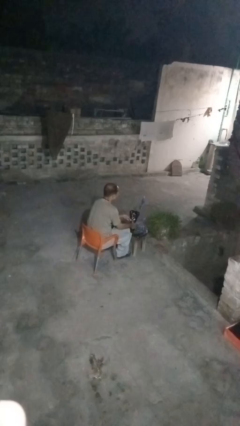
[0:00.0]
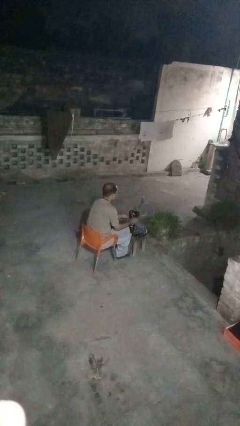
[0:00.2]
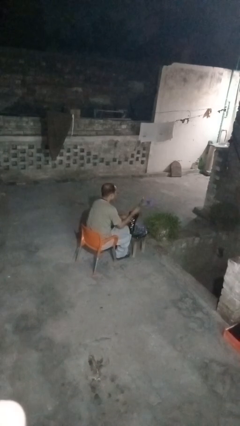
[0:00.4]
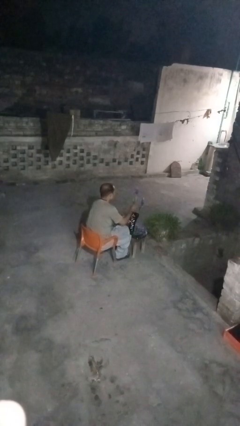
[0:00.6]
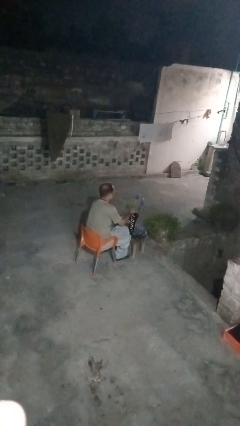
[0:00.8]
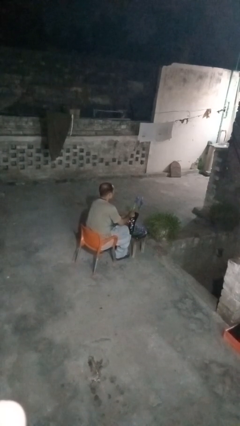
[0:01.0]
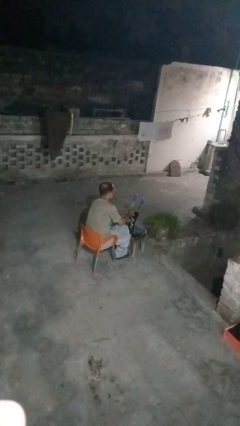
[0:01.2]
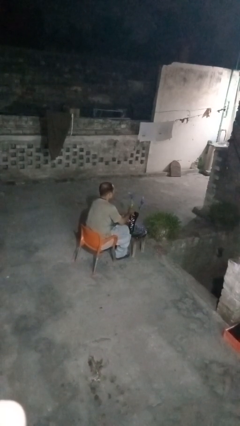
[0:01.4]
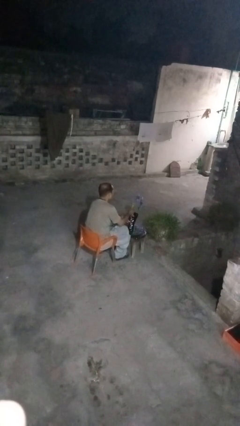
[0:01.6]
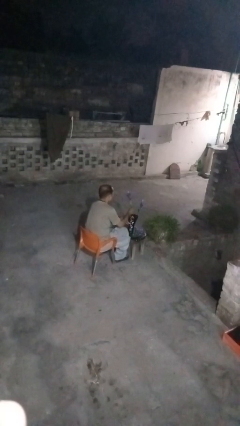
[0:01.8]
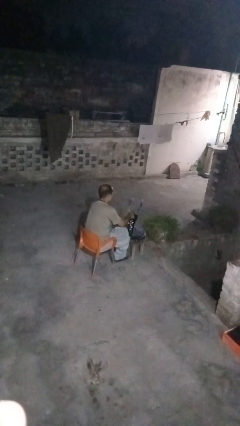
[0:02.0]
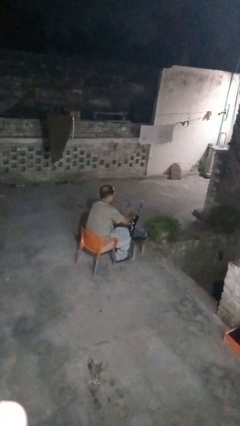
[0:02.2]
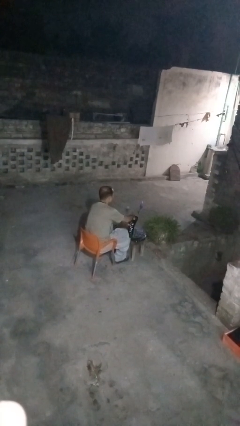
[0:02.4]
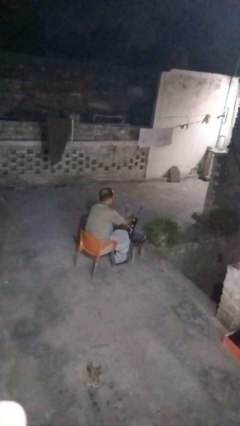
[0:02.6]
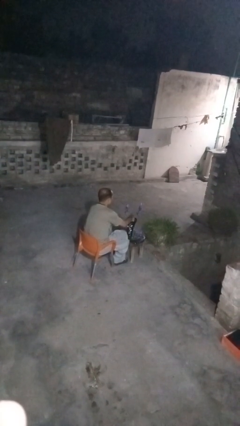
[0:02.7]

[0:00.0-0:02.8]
person arranges flowers in vase

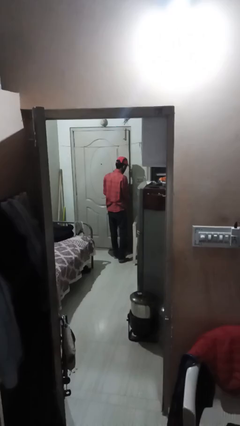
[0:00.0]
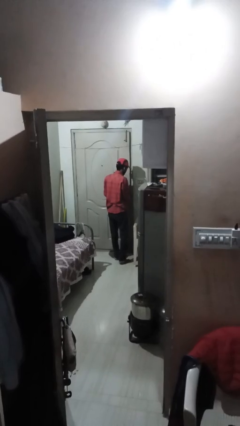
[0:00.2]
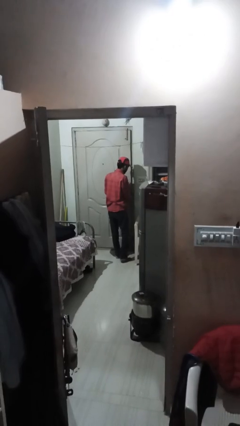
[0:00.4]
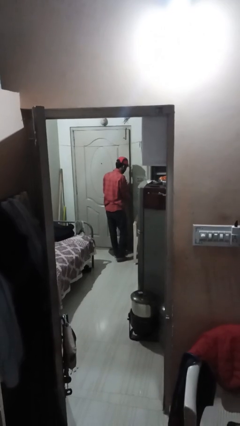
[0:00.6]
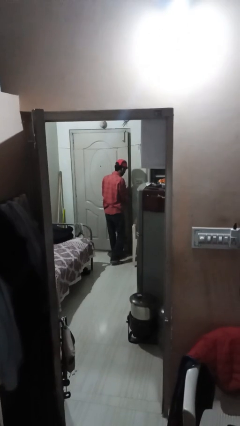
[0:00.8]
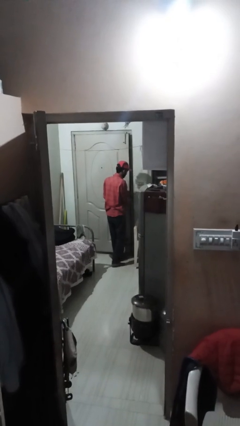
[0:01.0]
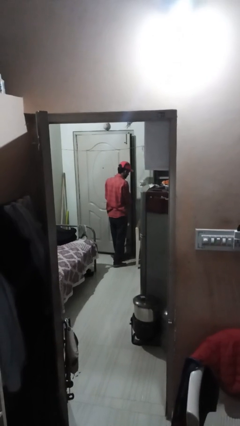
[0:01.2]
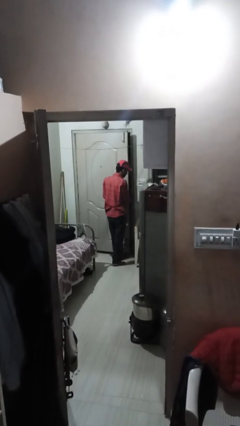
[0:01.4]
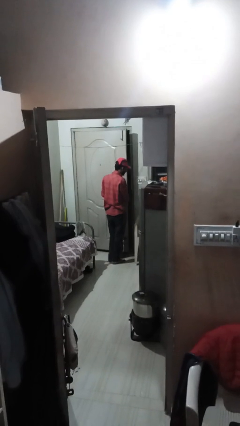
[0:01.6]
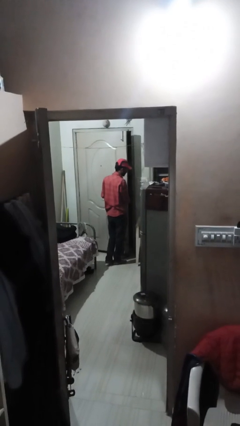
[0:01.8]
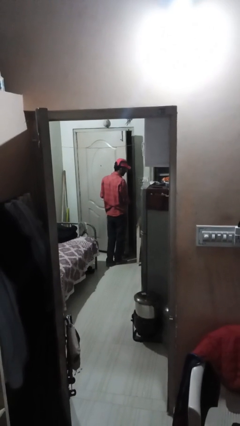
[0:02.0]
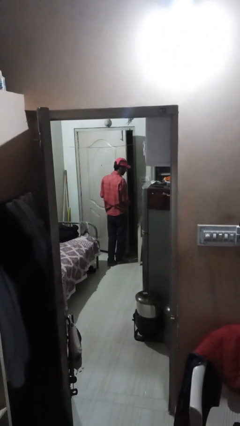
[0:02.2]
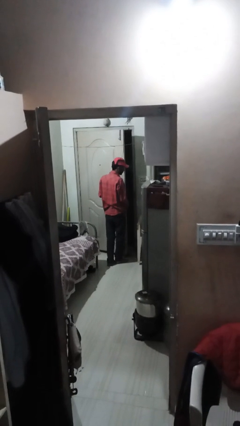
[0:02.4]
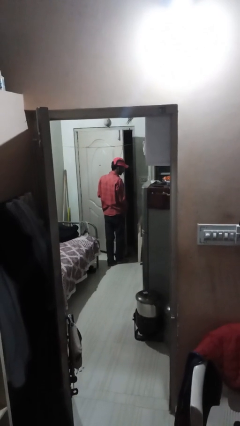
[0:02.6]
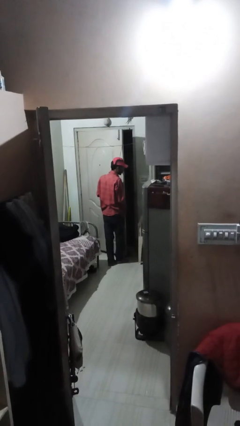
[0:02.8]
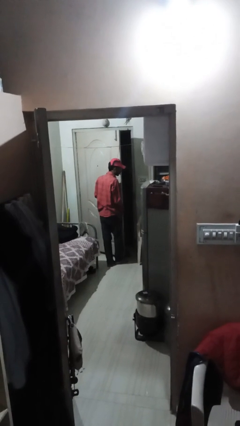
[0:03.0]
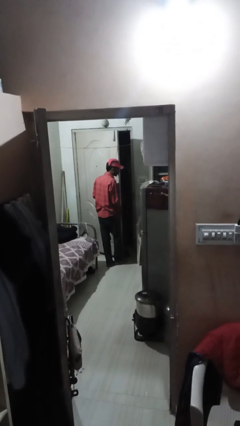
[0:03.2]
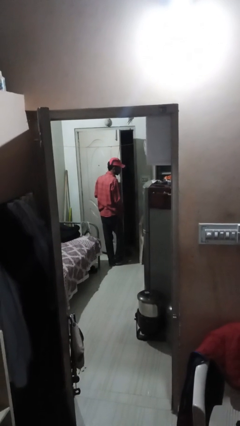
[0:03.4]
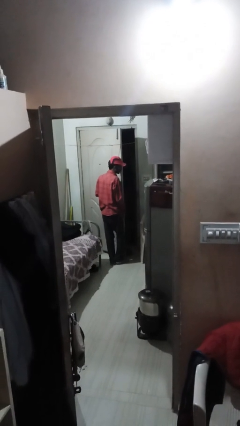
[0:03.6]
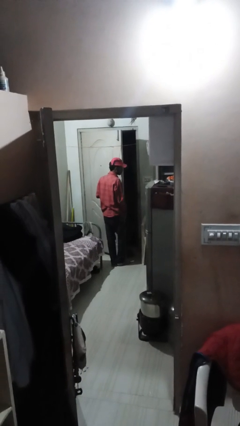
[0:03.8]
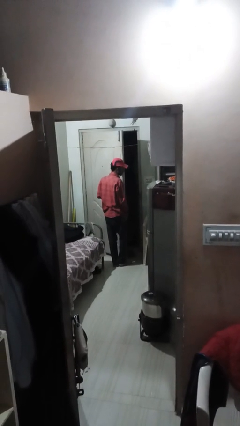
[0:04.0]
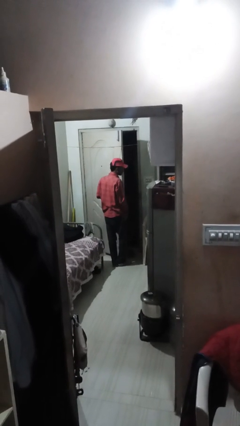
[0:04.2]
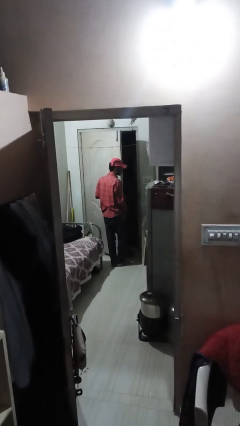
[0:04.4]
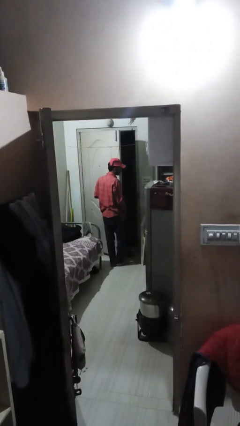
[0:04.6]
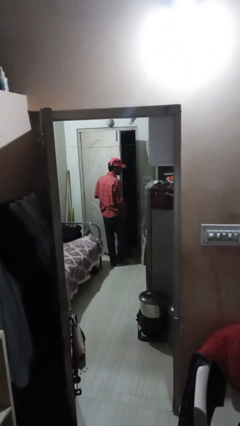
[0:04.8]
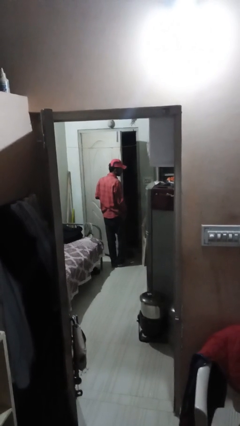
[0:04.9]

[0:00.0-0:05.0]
person opens facility door

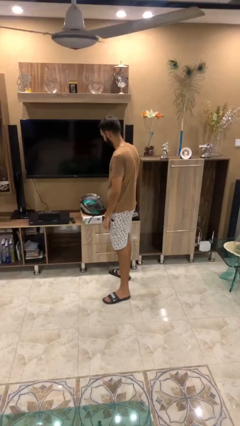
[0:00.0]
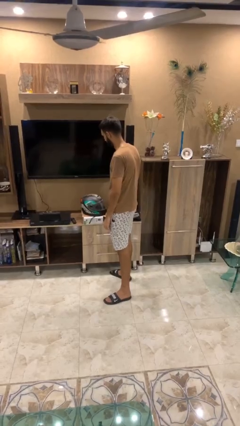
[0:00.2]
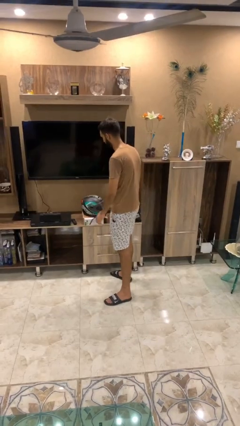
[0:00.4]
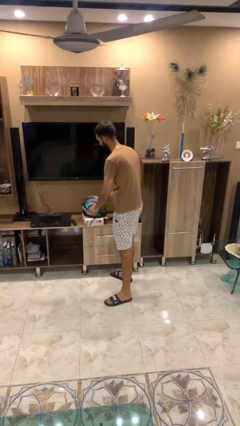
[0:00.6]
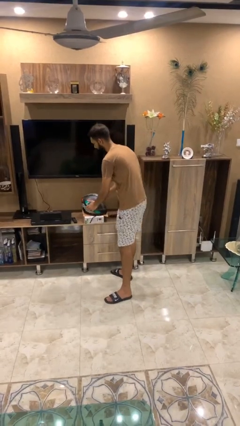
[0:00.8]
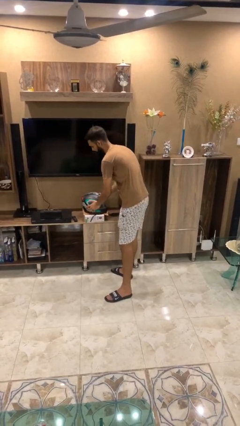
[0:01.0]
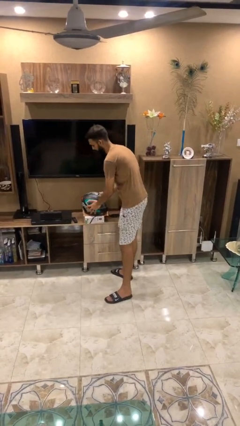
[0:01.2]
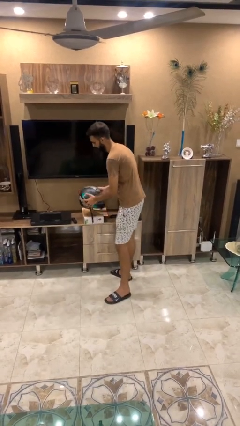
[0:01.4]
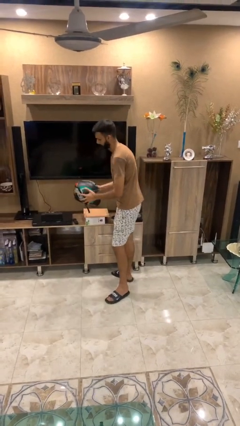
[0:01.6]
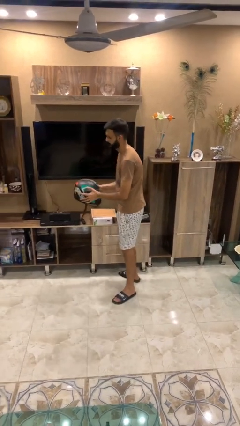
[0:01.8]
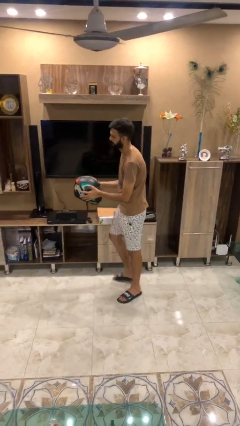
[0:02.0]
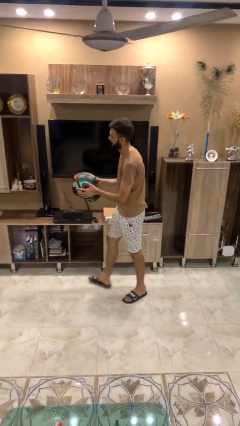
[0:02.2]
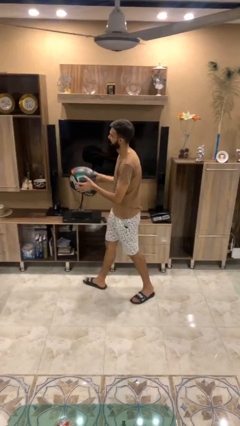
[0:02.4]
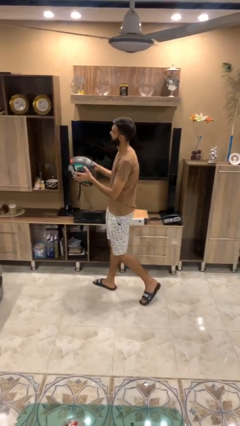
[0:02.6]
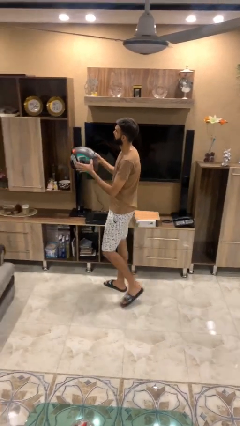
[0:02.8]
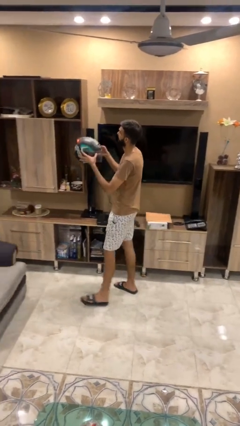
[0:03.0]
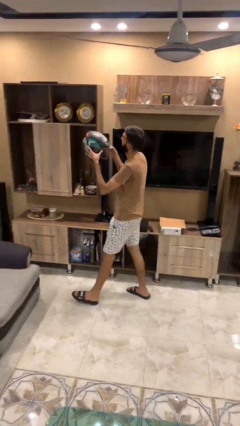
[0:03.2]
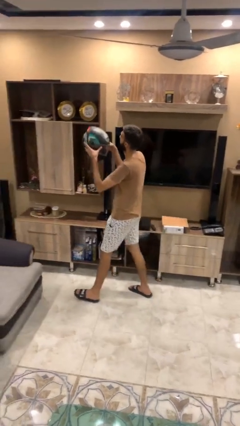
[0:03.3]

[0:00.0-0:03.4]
person picks up object from table

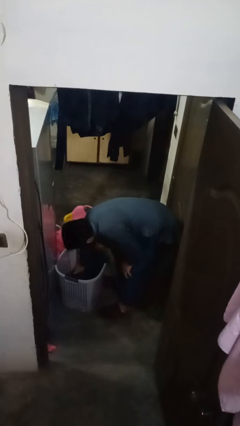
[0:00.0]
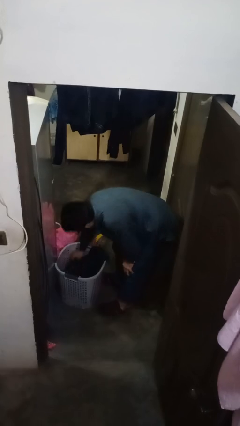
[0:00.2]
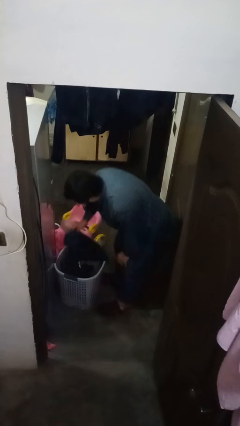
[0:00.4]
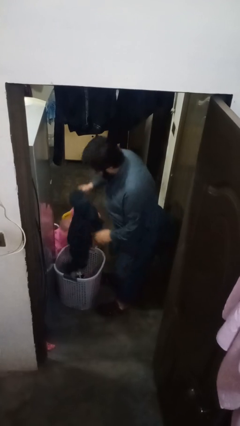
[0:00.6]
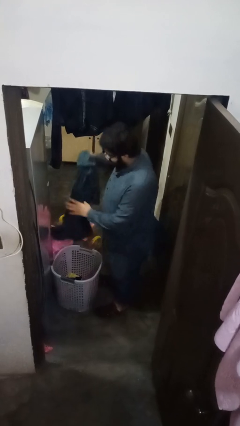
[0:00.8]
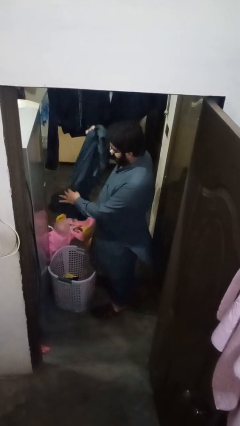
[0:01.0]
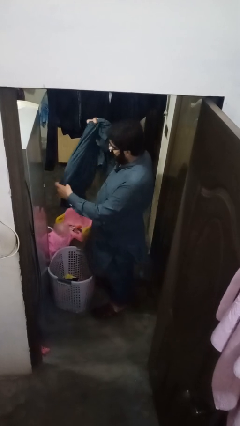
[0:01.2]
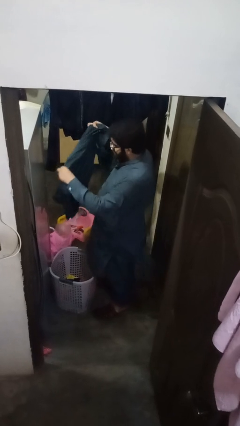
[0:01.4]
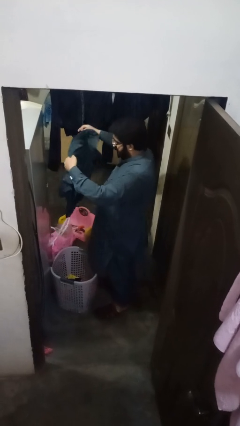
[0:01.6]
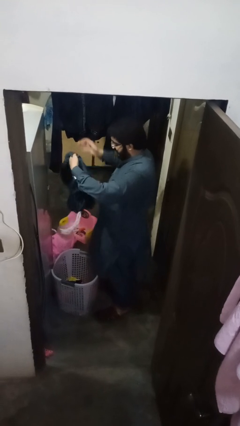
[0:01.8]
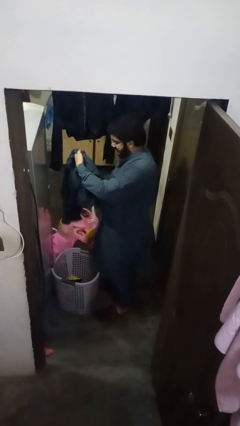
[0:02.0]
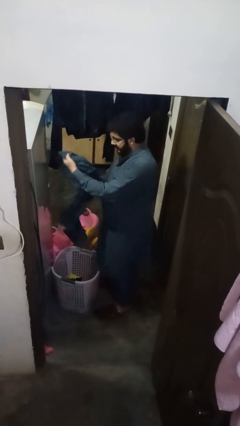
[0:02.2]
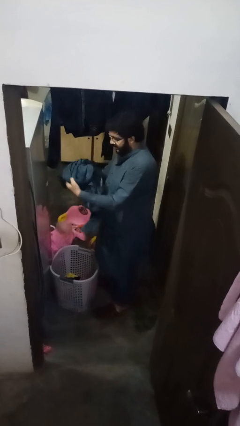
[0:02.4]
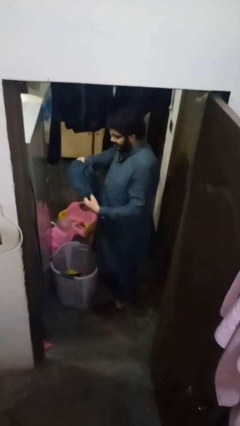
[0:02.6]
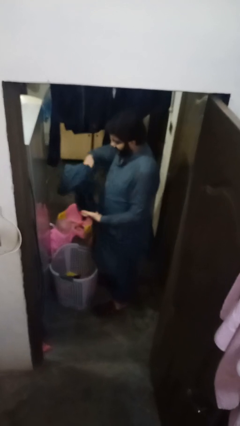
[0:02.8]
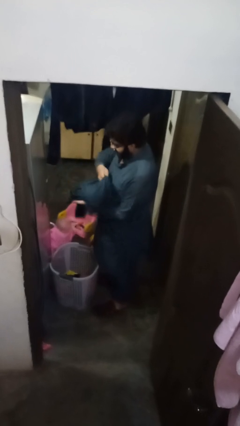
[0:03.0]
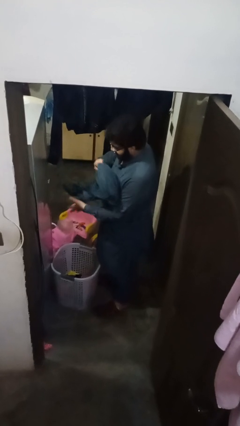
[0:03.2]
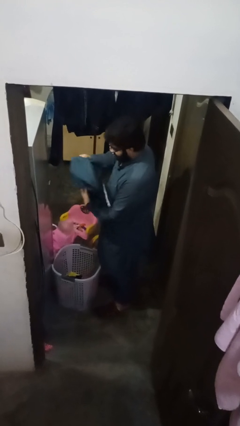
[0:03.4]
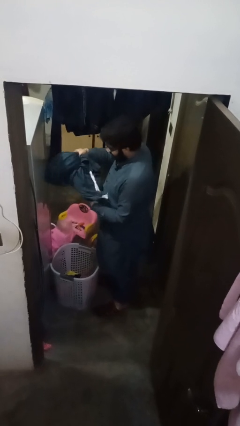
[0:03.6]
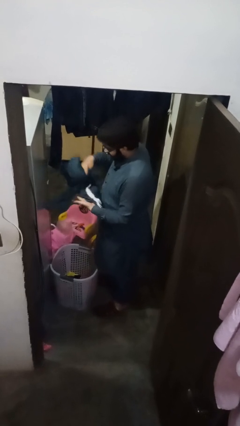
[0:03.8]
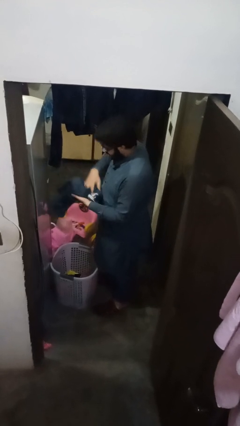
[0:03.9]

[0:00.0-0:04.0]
person folds pants

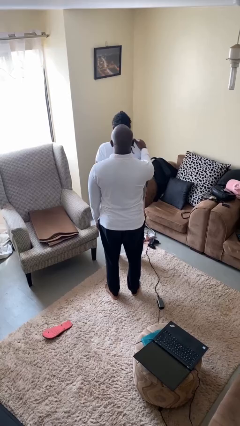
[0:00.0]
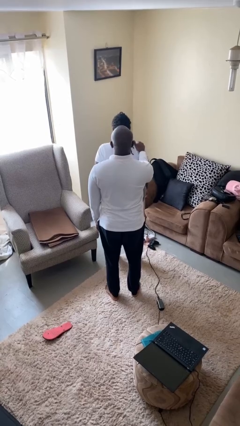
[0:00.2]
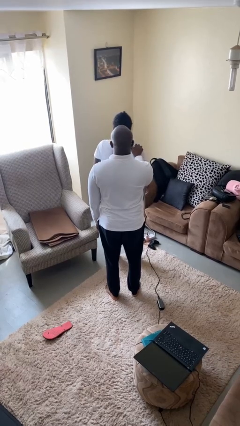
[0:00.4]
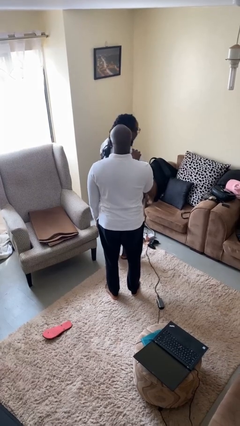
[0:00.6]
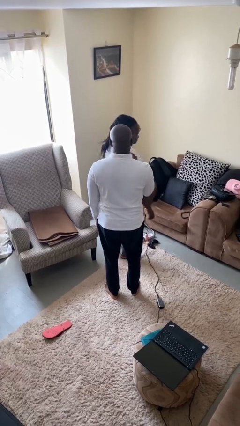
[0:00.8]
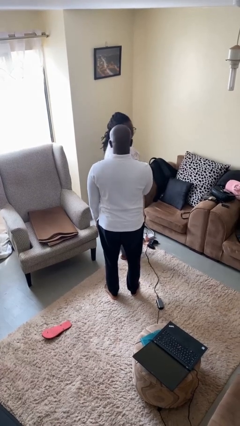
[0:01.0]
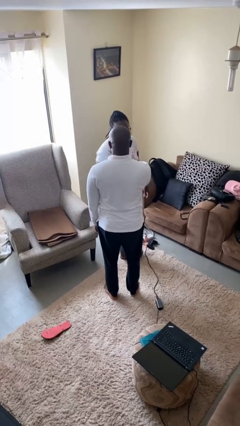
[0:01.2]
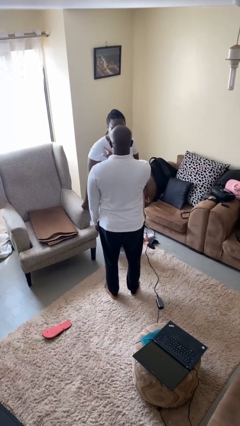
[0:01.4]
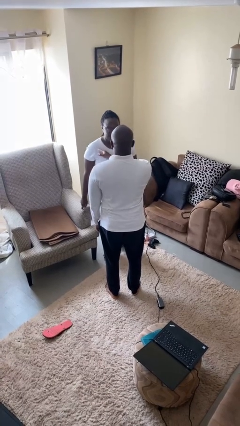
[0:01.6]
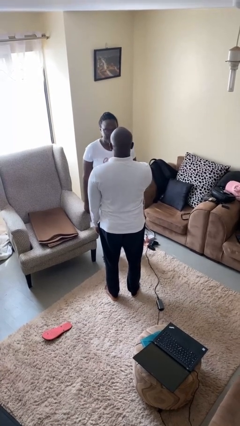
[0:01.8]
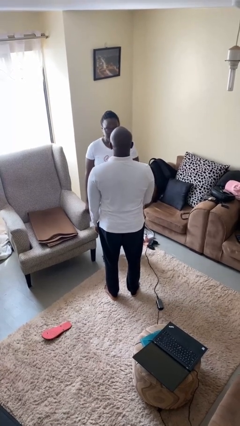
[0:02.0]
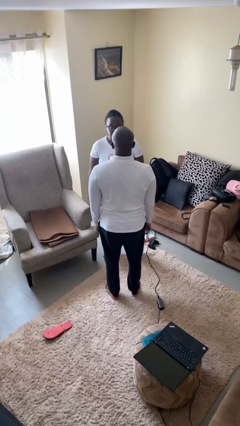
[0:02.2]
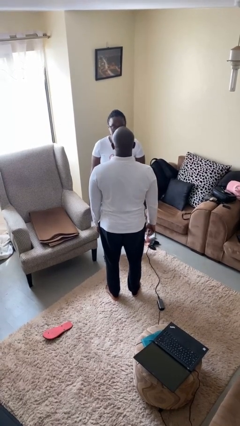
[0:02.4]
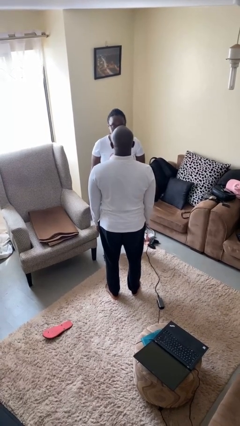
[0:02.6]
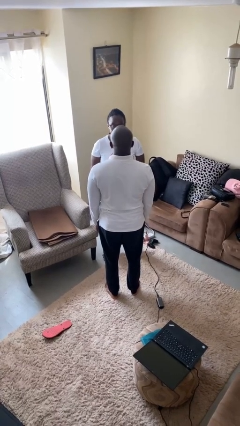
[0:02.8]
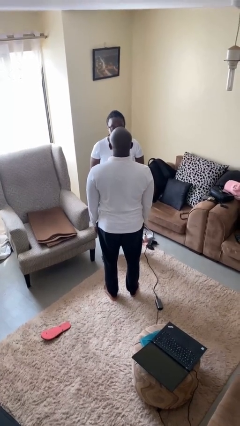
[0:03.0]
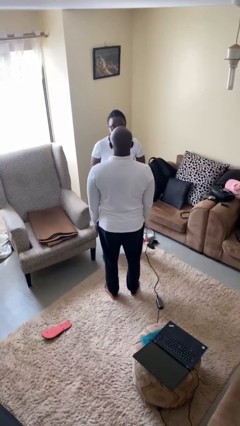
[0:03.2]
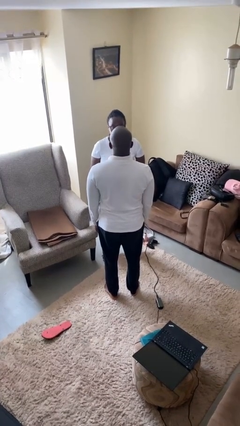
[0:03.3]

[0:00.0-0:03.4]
person spins person around
